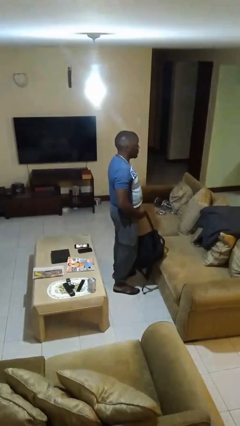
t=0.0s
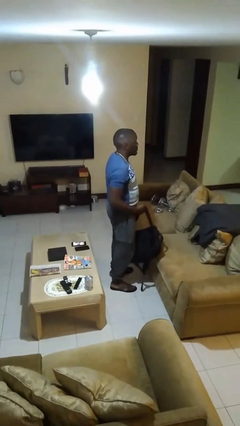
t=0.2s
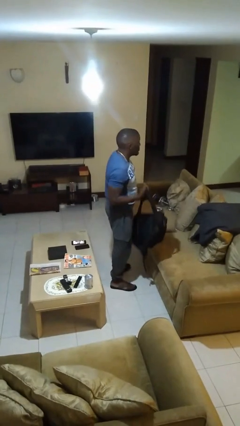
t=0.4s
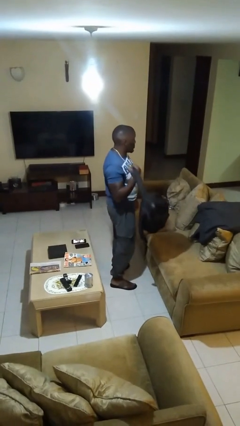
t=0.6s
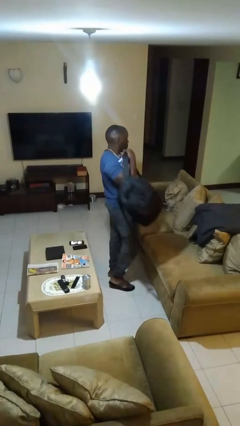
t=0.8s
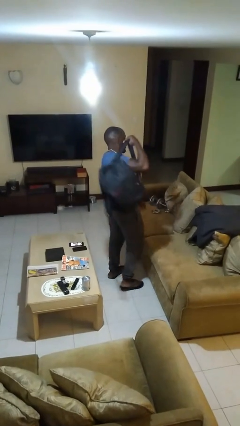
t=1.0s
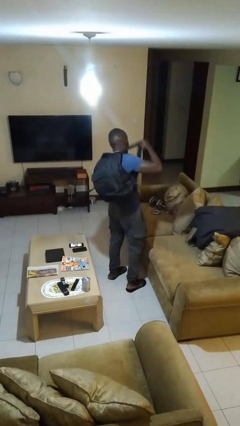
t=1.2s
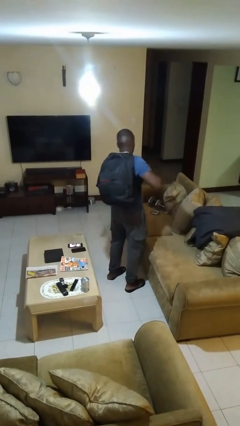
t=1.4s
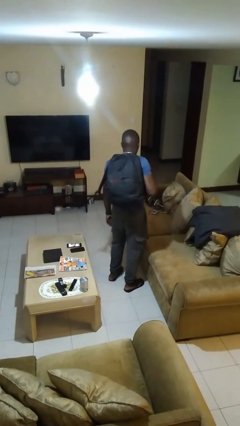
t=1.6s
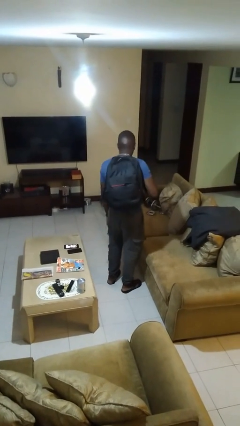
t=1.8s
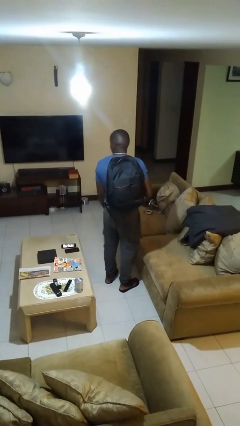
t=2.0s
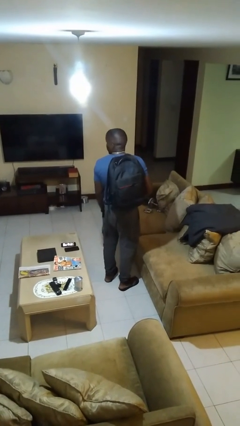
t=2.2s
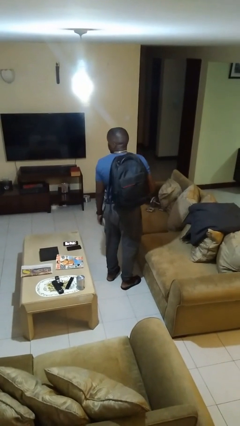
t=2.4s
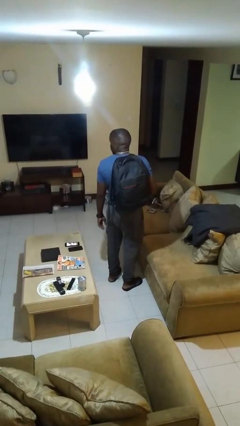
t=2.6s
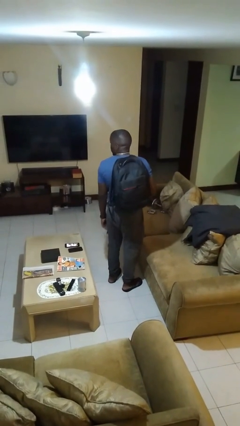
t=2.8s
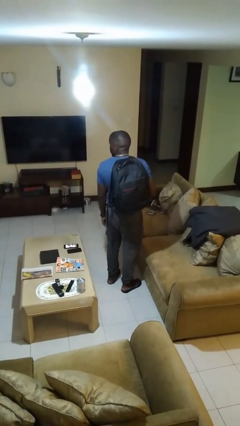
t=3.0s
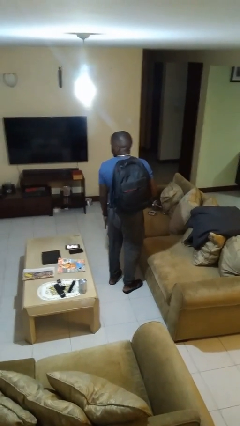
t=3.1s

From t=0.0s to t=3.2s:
person puts on backpack

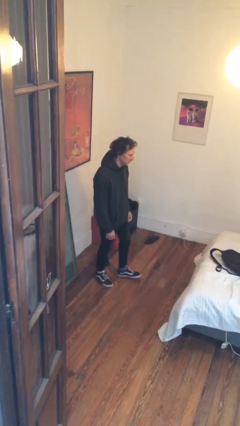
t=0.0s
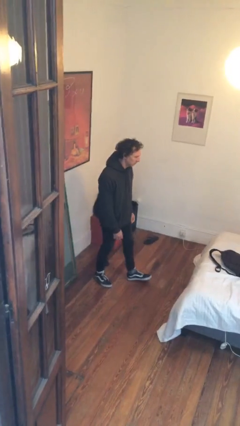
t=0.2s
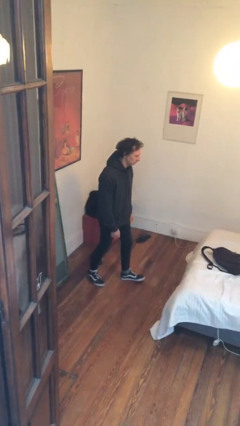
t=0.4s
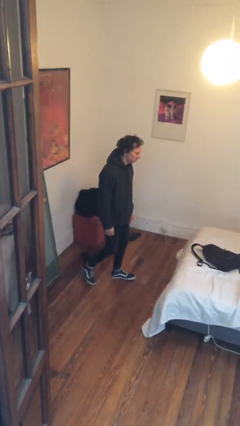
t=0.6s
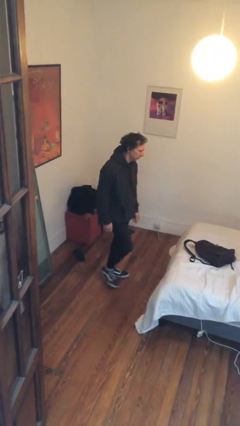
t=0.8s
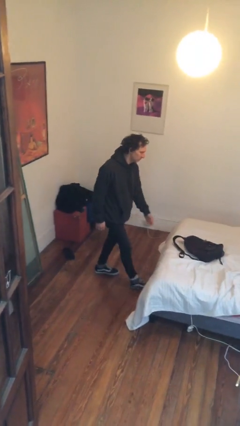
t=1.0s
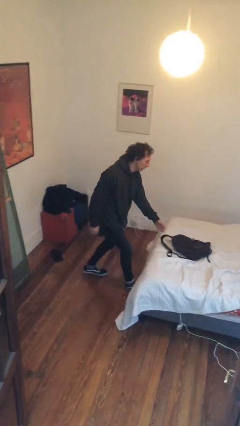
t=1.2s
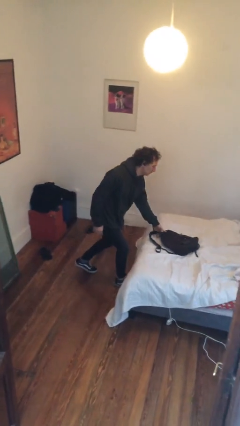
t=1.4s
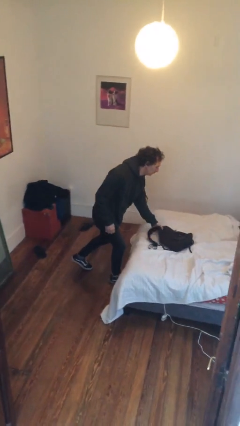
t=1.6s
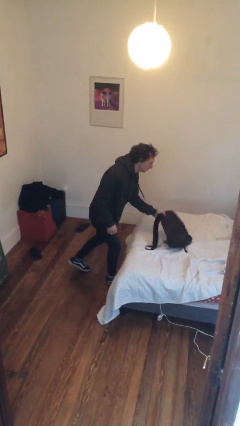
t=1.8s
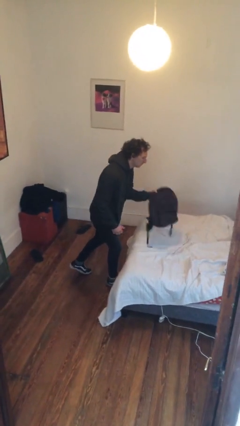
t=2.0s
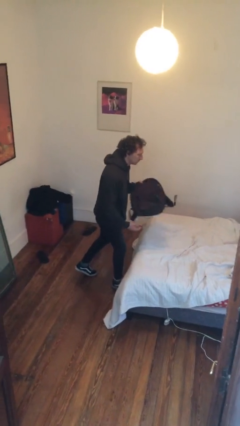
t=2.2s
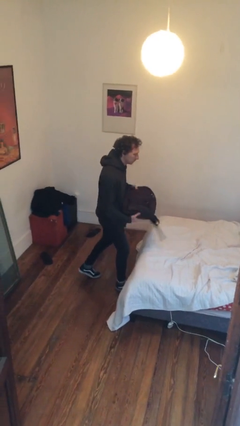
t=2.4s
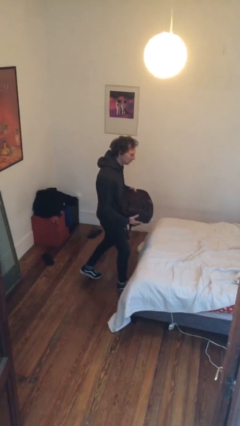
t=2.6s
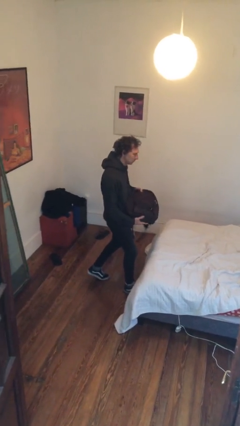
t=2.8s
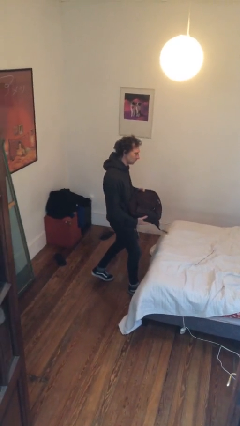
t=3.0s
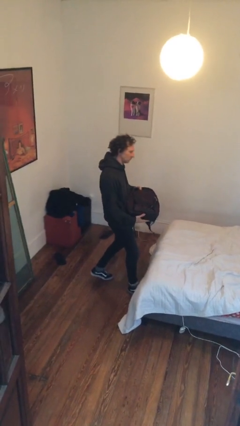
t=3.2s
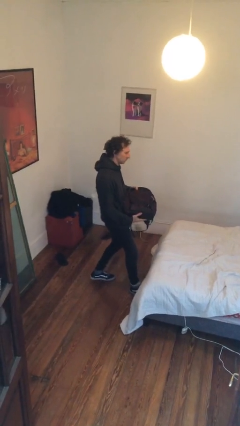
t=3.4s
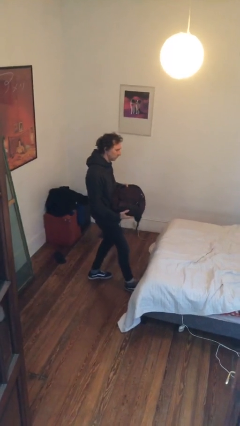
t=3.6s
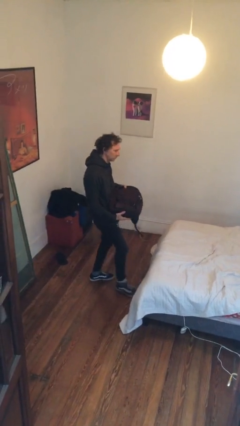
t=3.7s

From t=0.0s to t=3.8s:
person picks up object from bed

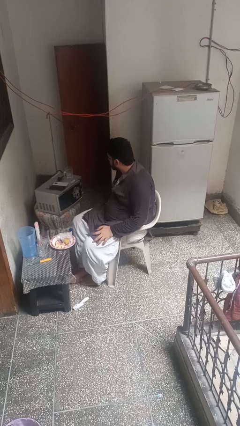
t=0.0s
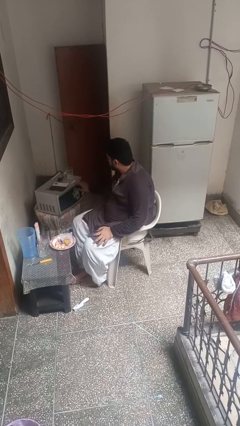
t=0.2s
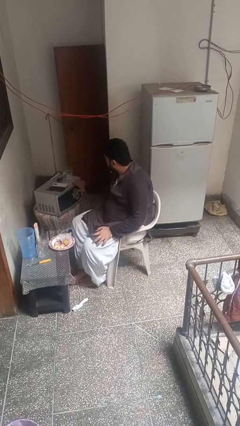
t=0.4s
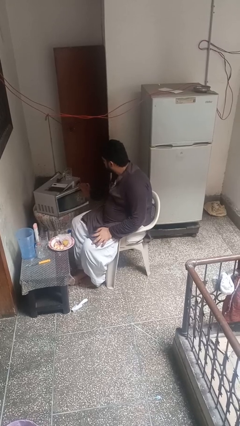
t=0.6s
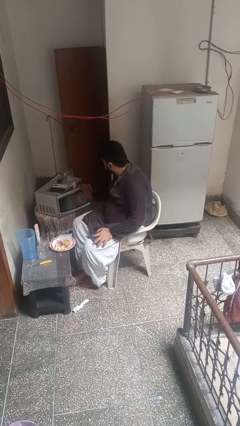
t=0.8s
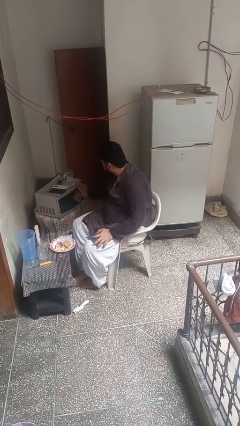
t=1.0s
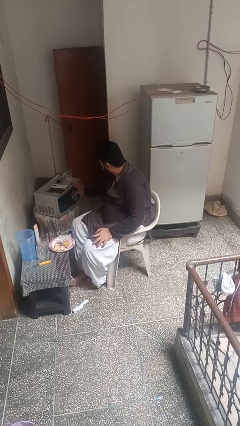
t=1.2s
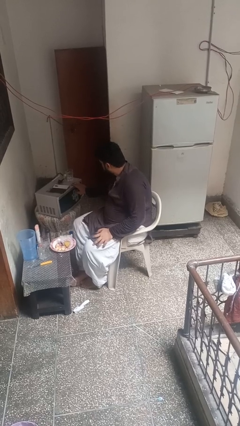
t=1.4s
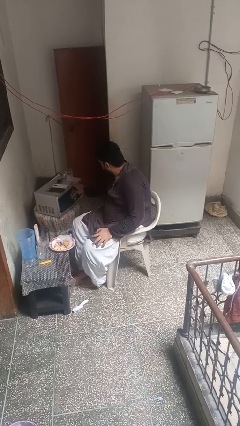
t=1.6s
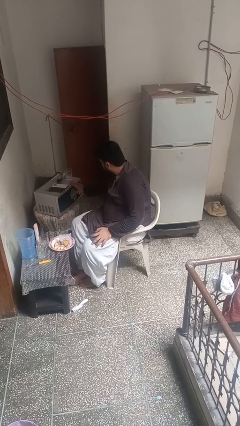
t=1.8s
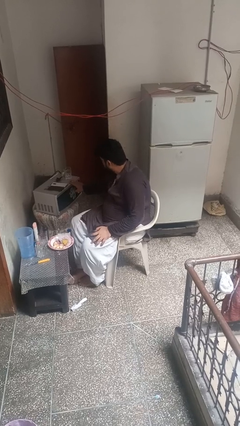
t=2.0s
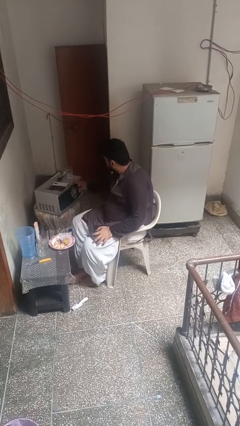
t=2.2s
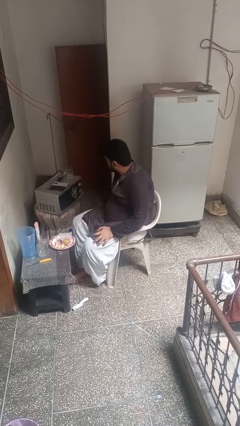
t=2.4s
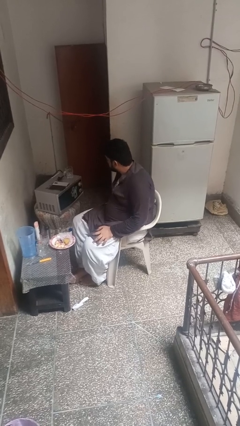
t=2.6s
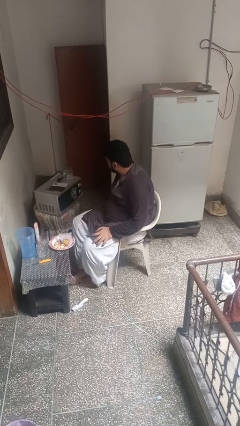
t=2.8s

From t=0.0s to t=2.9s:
person closes microwave

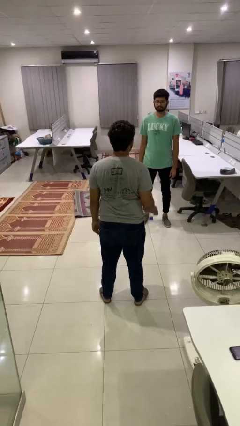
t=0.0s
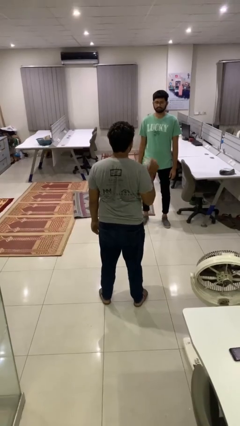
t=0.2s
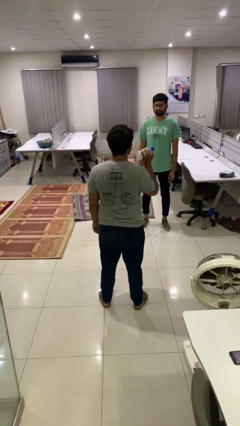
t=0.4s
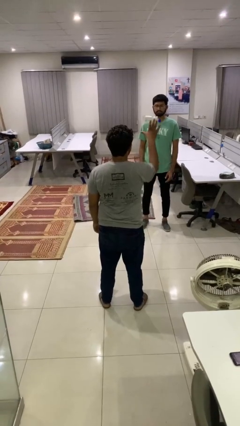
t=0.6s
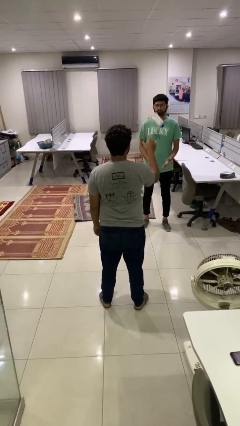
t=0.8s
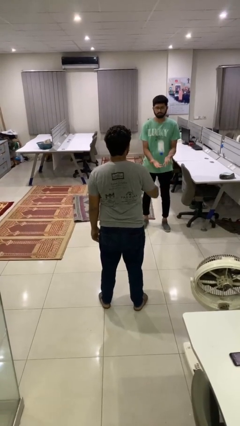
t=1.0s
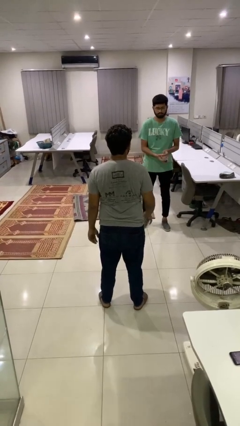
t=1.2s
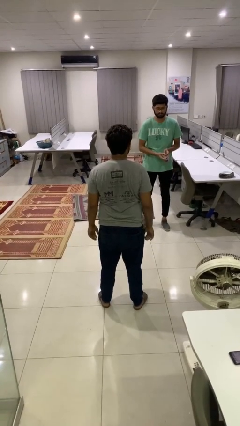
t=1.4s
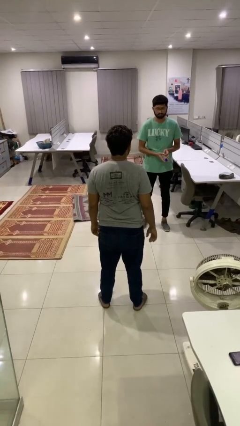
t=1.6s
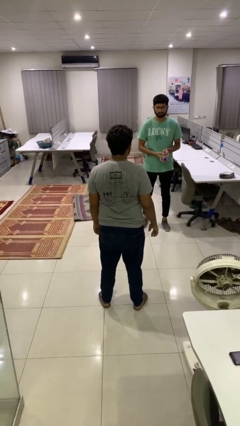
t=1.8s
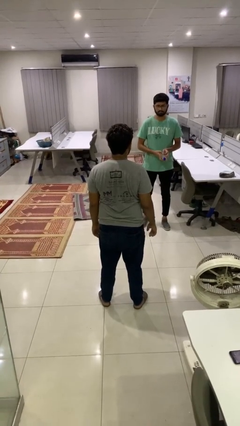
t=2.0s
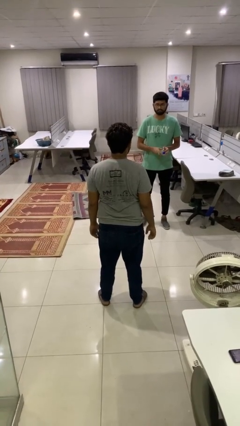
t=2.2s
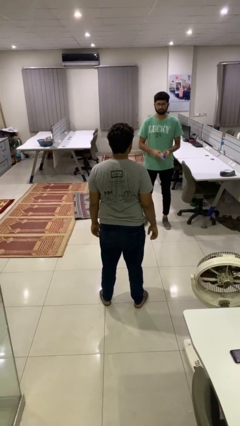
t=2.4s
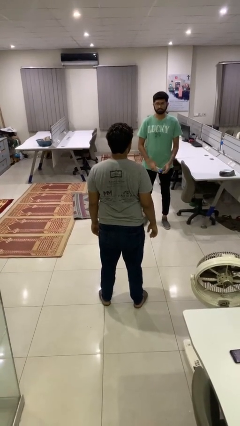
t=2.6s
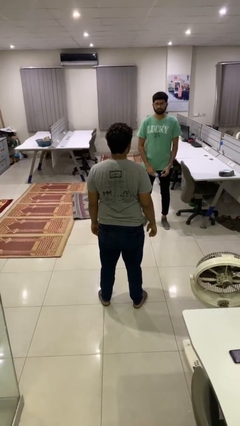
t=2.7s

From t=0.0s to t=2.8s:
person throws object to person

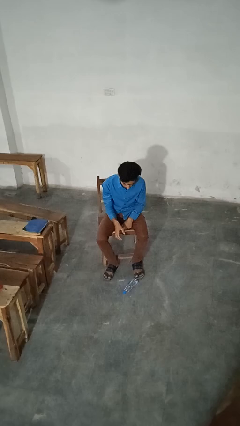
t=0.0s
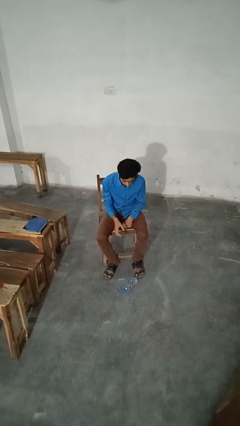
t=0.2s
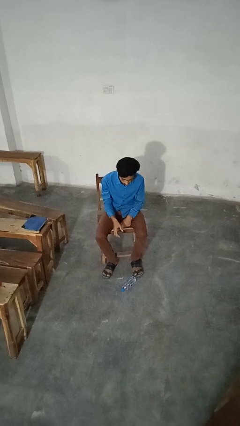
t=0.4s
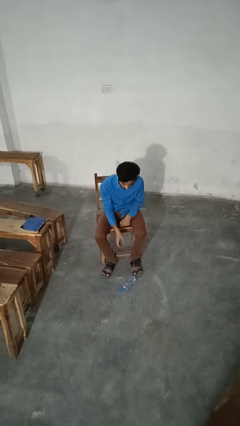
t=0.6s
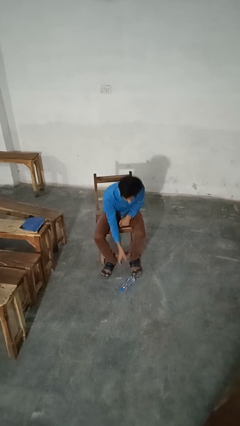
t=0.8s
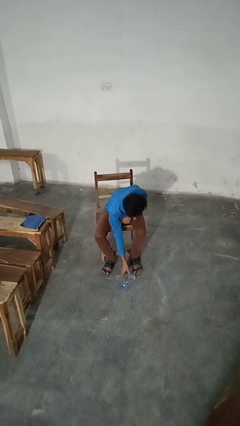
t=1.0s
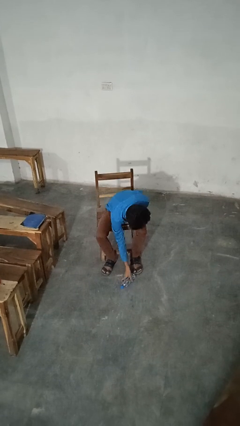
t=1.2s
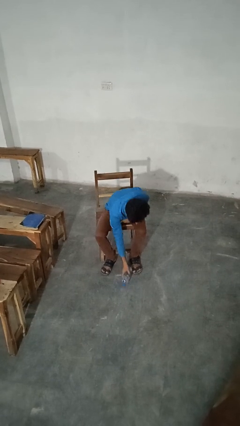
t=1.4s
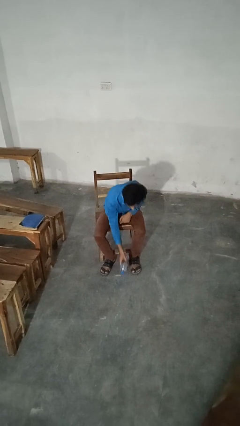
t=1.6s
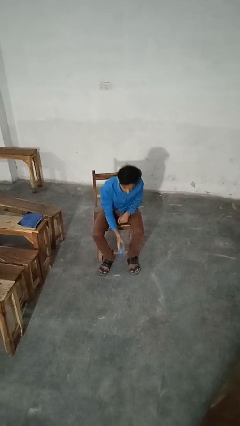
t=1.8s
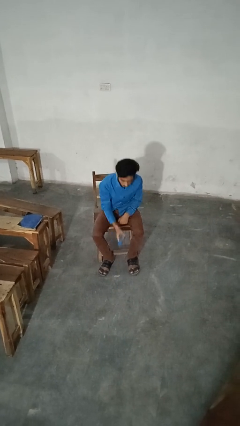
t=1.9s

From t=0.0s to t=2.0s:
person picks up object from floor

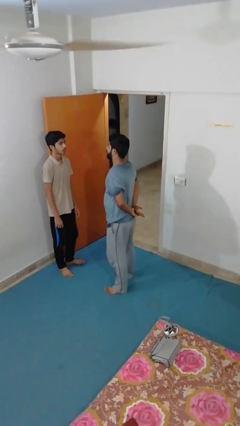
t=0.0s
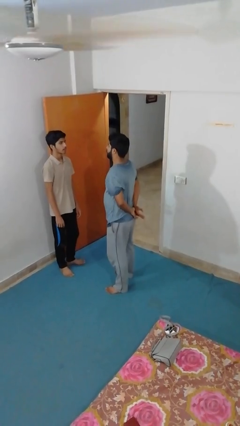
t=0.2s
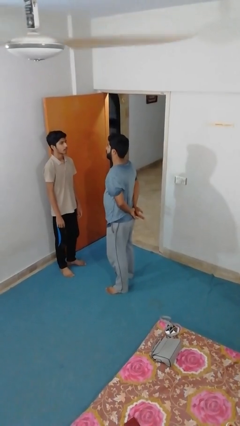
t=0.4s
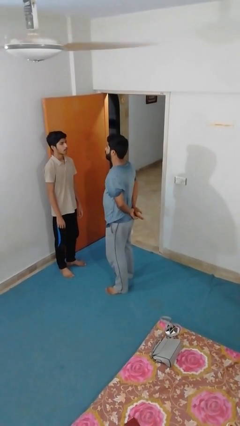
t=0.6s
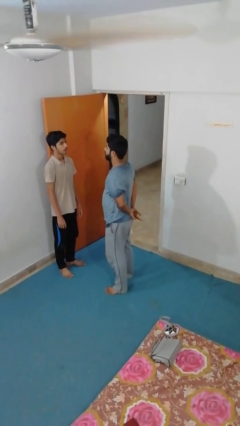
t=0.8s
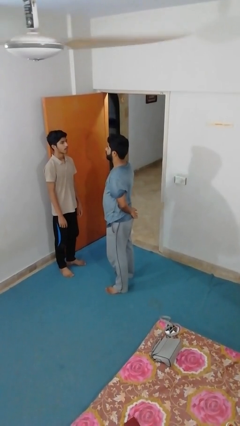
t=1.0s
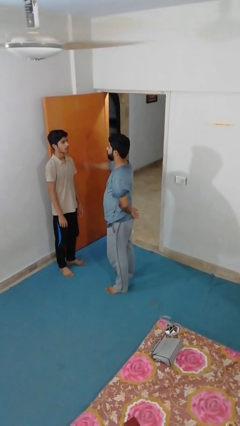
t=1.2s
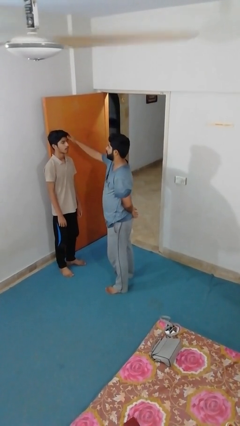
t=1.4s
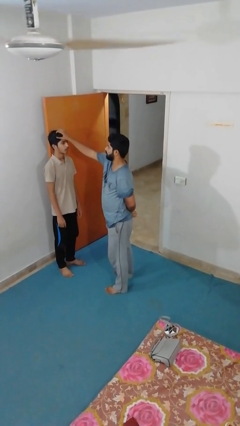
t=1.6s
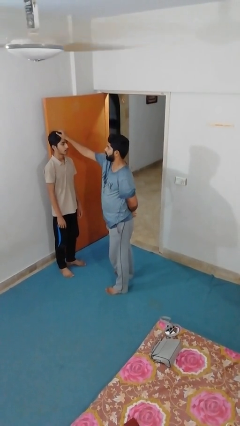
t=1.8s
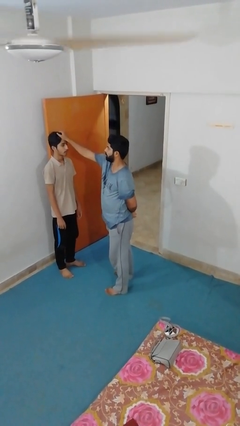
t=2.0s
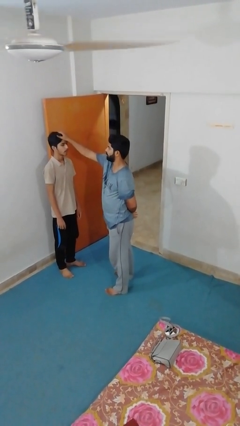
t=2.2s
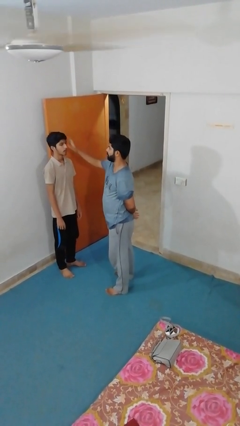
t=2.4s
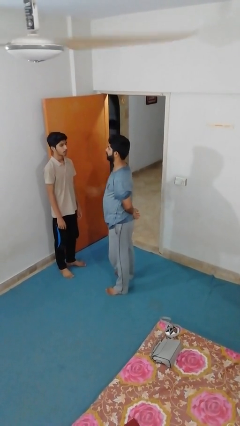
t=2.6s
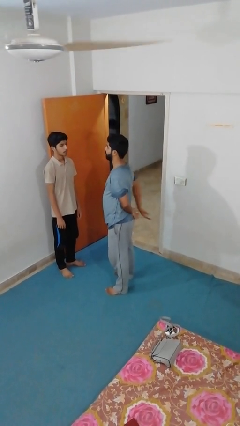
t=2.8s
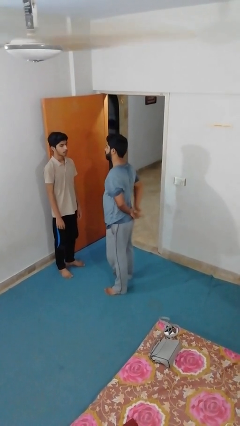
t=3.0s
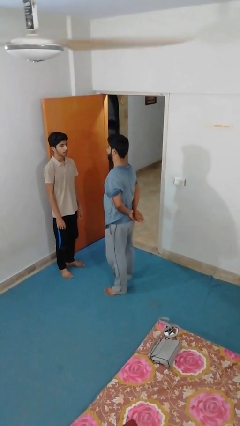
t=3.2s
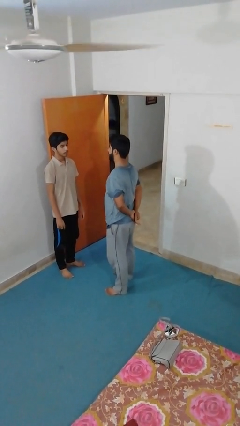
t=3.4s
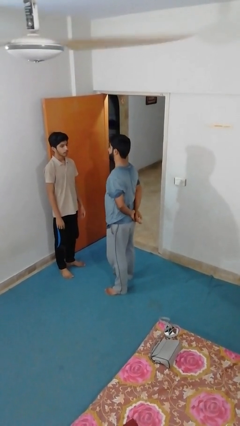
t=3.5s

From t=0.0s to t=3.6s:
person grabs person by hair
